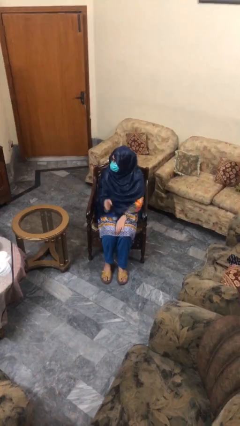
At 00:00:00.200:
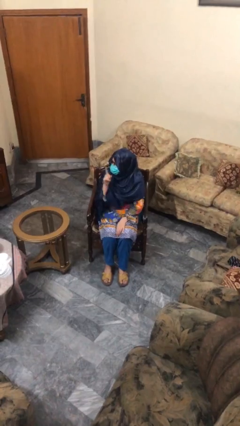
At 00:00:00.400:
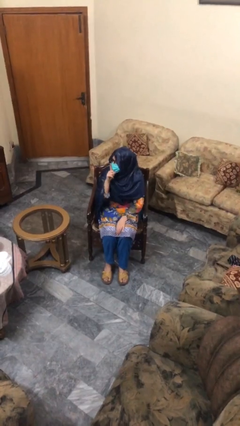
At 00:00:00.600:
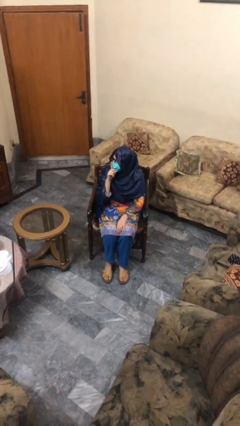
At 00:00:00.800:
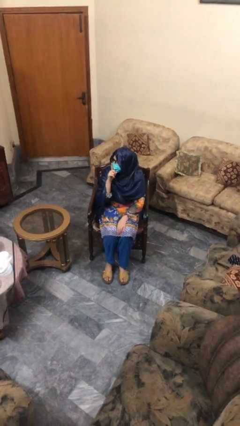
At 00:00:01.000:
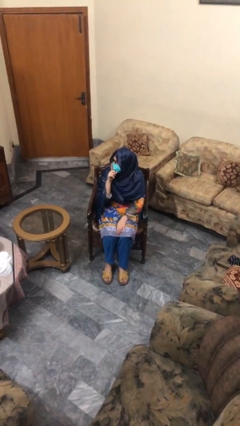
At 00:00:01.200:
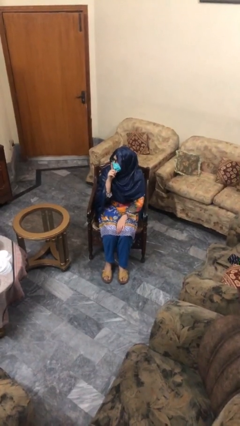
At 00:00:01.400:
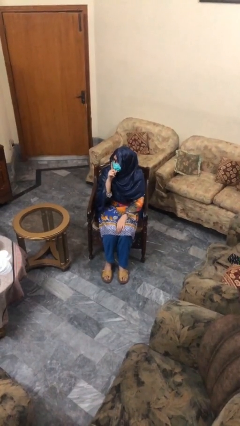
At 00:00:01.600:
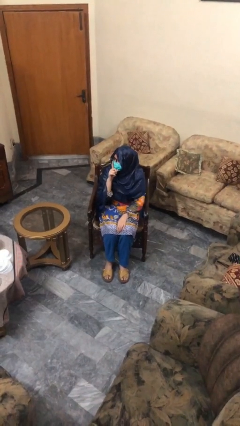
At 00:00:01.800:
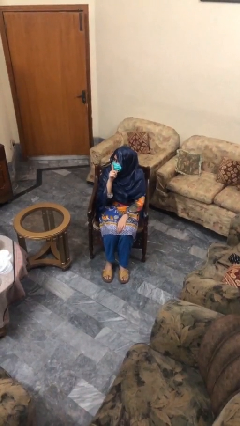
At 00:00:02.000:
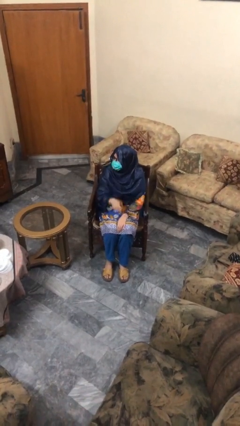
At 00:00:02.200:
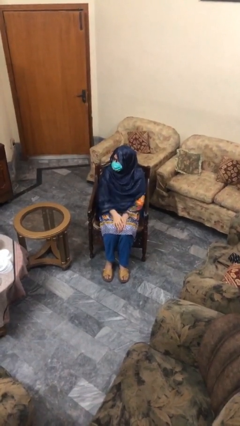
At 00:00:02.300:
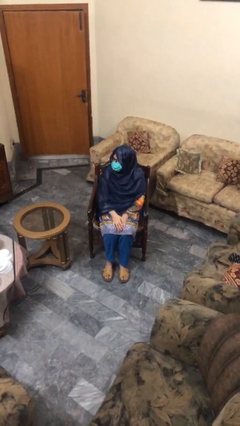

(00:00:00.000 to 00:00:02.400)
person gestures be quiet

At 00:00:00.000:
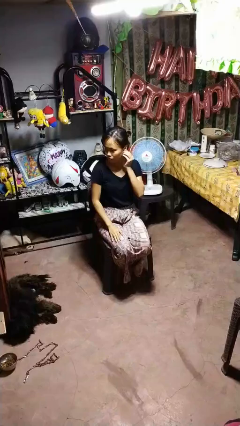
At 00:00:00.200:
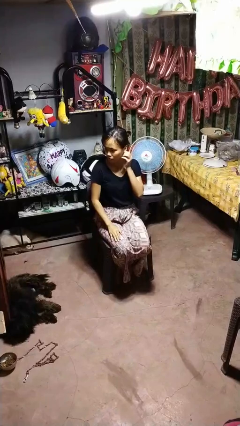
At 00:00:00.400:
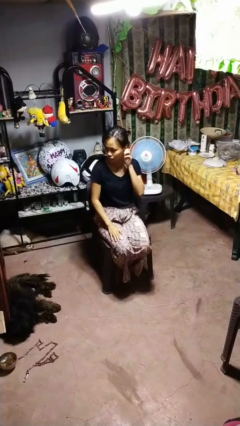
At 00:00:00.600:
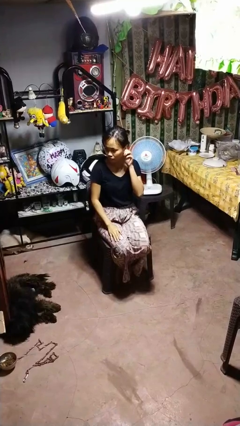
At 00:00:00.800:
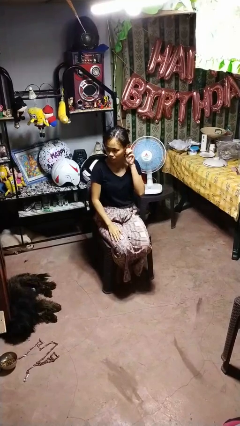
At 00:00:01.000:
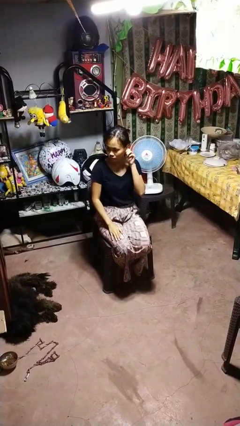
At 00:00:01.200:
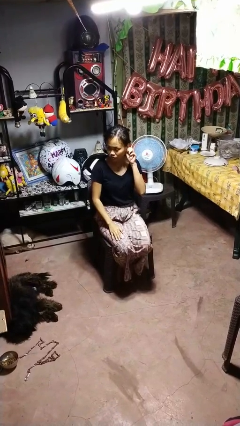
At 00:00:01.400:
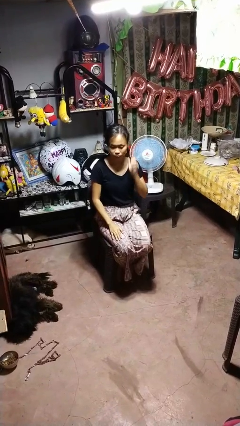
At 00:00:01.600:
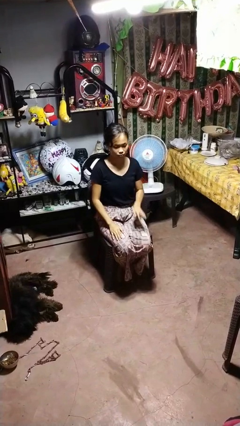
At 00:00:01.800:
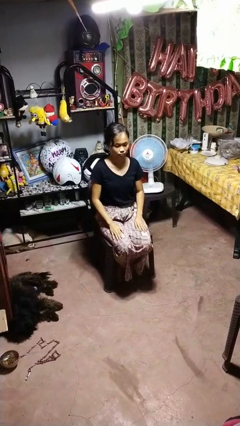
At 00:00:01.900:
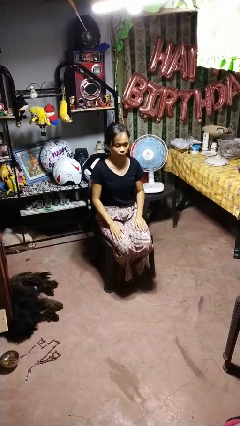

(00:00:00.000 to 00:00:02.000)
person touches earlobe

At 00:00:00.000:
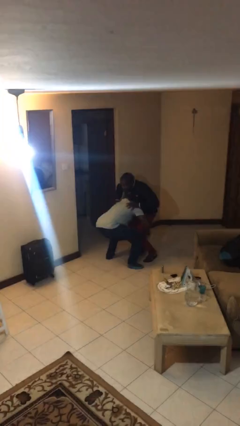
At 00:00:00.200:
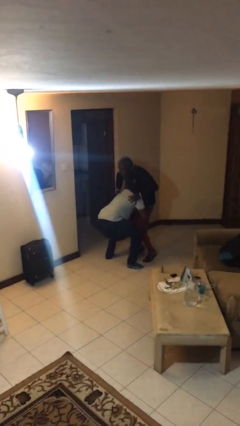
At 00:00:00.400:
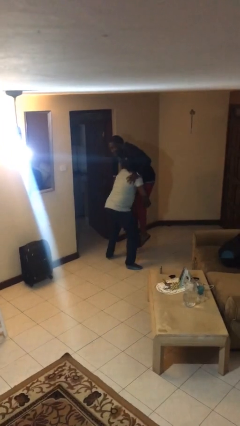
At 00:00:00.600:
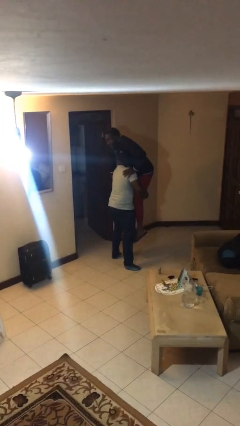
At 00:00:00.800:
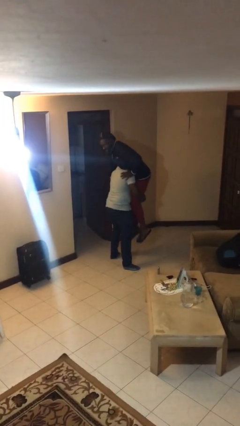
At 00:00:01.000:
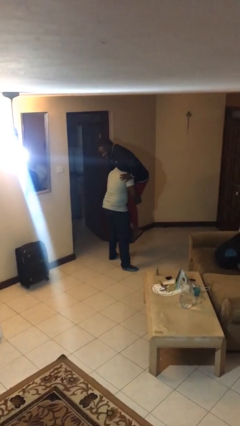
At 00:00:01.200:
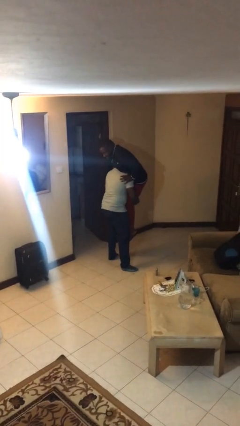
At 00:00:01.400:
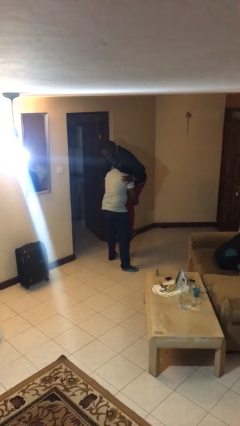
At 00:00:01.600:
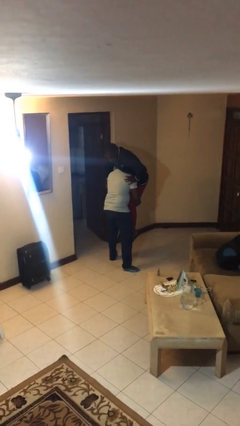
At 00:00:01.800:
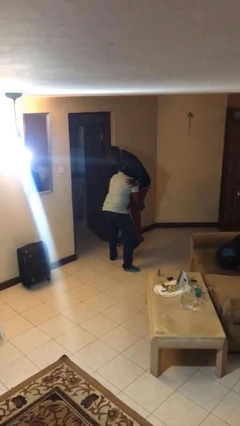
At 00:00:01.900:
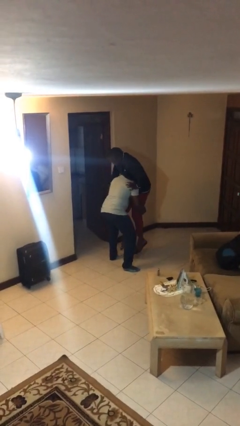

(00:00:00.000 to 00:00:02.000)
person picks up person

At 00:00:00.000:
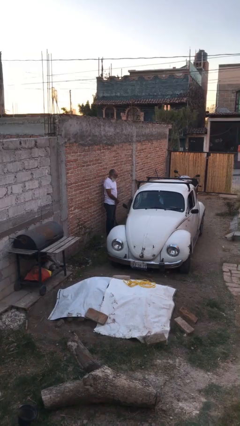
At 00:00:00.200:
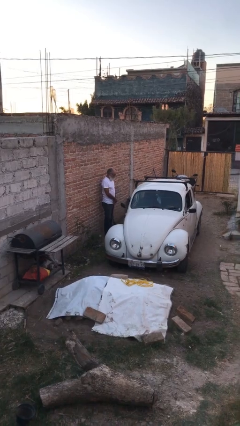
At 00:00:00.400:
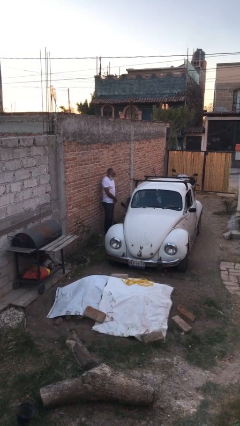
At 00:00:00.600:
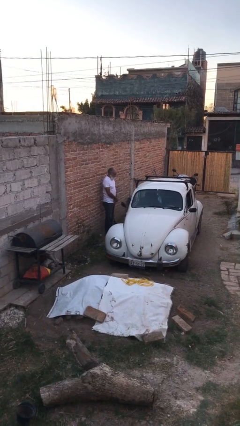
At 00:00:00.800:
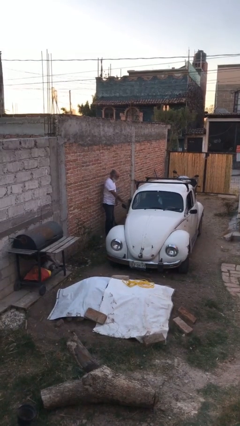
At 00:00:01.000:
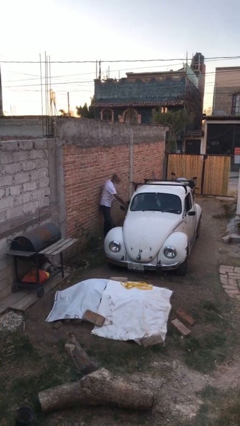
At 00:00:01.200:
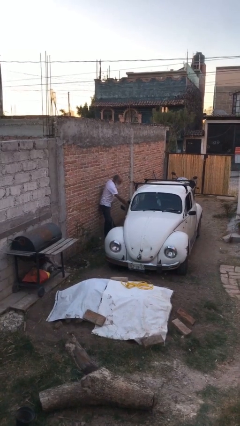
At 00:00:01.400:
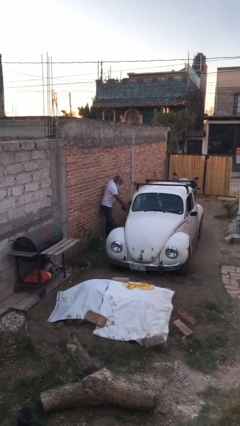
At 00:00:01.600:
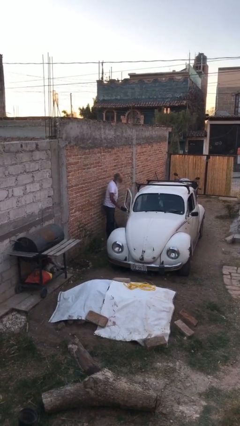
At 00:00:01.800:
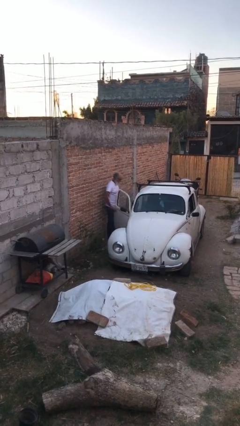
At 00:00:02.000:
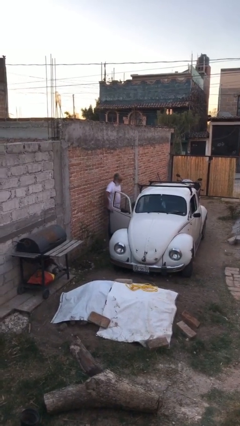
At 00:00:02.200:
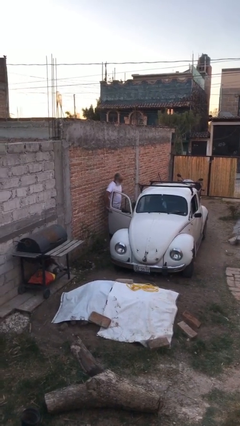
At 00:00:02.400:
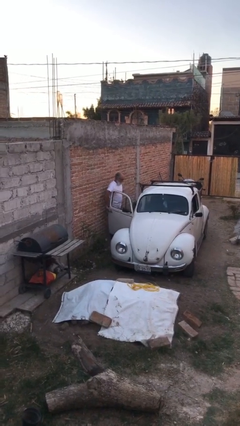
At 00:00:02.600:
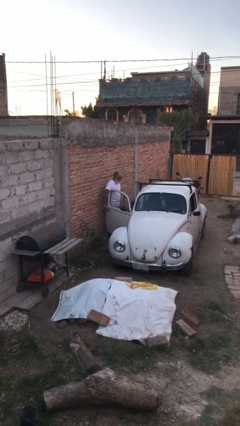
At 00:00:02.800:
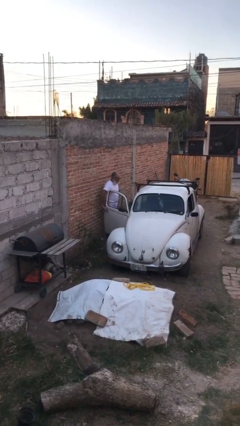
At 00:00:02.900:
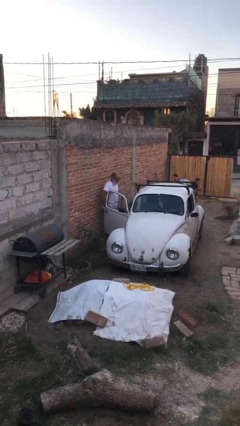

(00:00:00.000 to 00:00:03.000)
person opens car door

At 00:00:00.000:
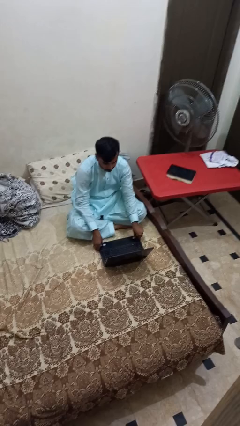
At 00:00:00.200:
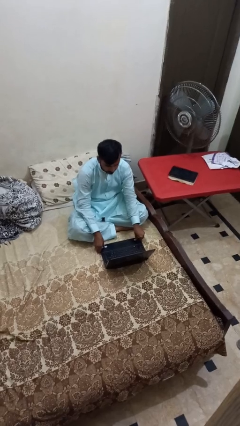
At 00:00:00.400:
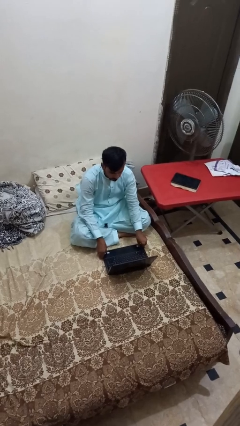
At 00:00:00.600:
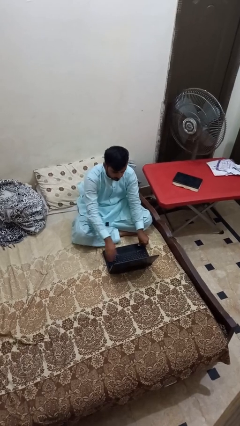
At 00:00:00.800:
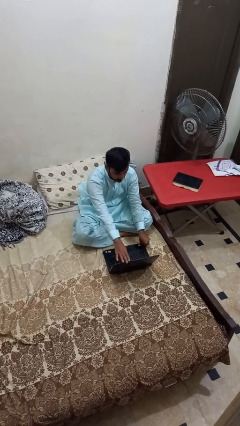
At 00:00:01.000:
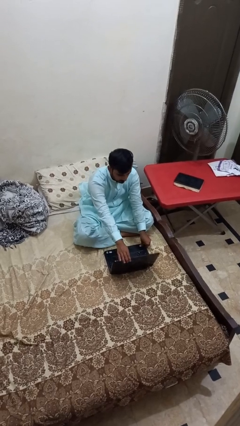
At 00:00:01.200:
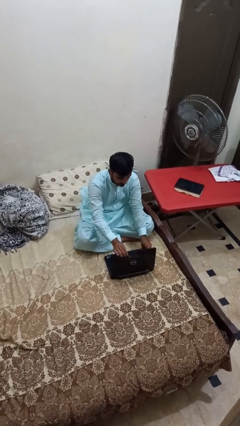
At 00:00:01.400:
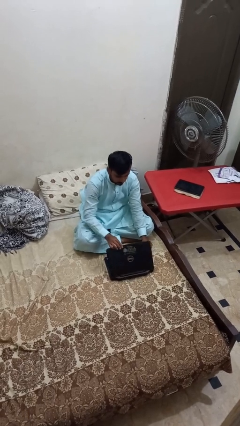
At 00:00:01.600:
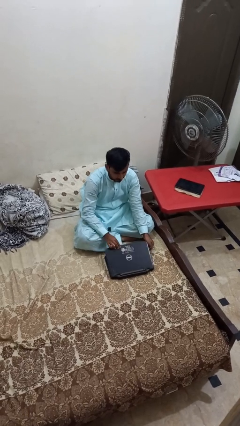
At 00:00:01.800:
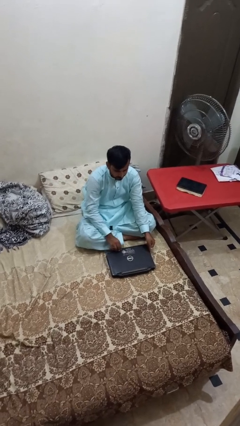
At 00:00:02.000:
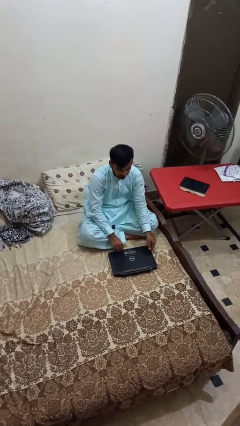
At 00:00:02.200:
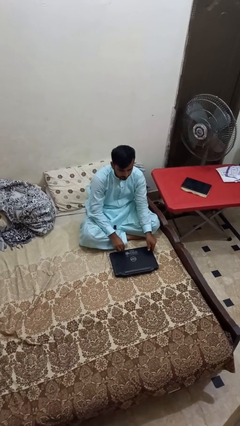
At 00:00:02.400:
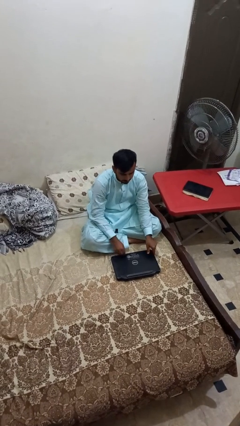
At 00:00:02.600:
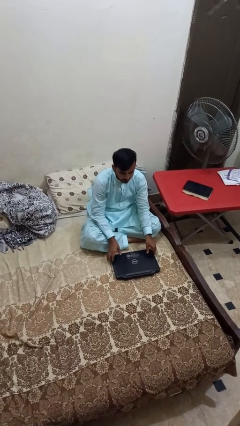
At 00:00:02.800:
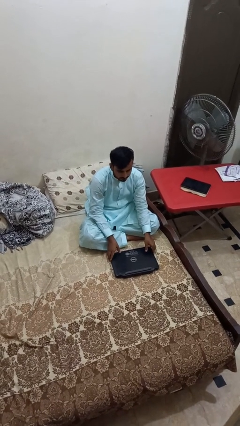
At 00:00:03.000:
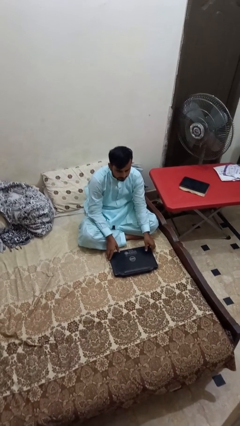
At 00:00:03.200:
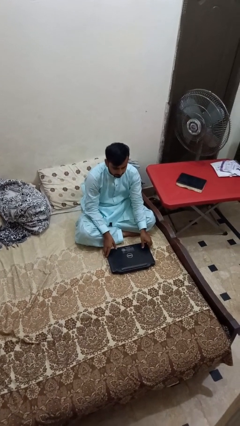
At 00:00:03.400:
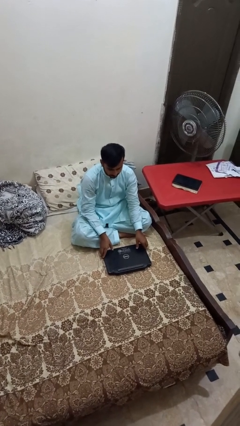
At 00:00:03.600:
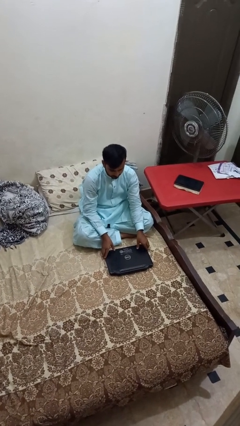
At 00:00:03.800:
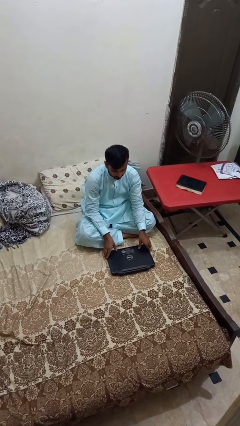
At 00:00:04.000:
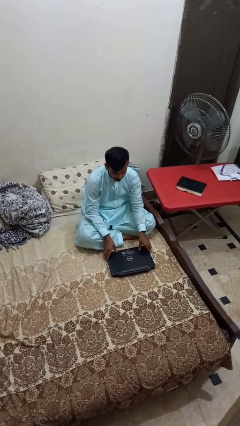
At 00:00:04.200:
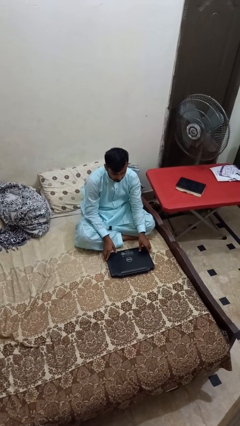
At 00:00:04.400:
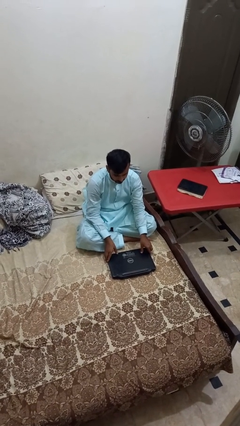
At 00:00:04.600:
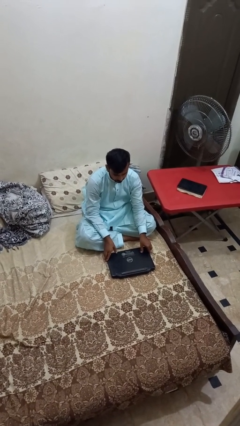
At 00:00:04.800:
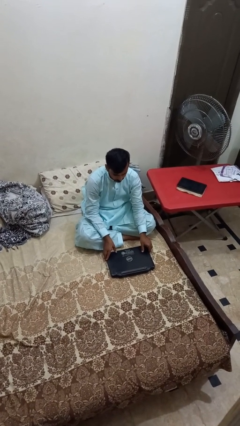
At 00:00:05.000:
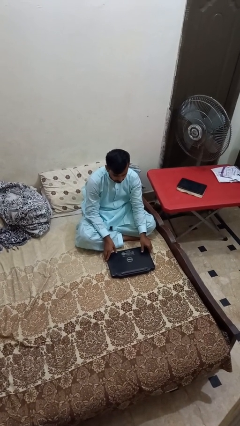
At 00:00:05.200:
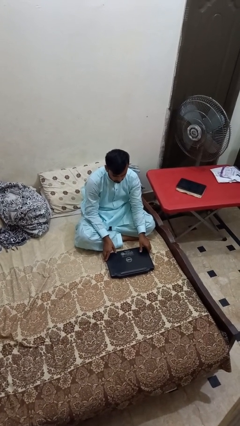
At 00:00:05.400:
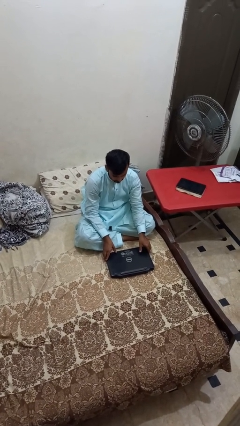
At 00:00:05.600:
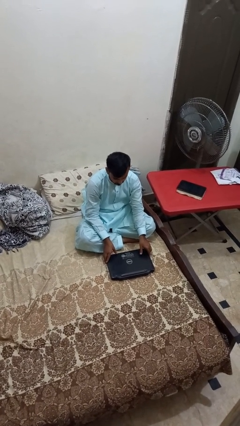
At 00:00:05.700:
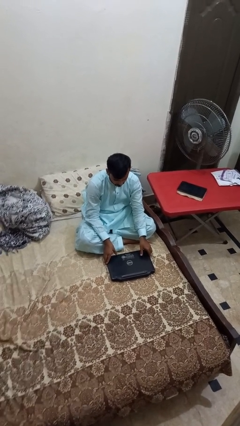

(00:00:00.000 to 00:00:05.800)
person closes laptop

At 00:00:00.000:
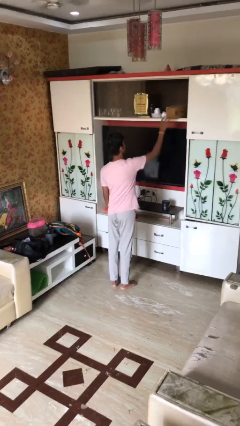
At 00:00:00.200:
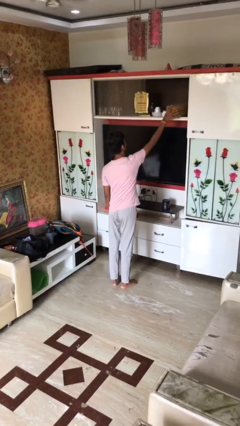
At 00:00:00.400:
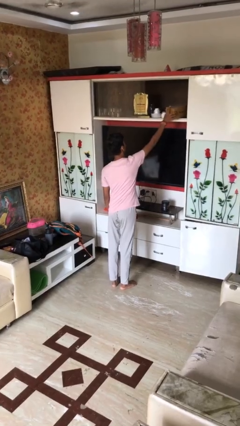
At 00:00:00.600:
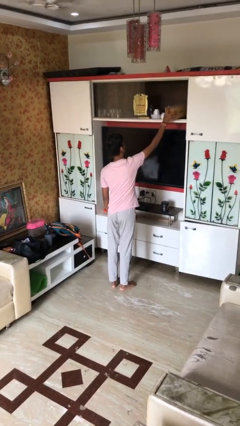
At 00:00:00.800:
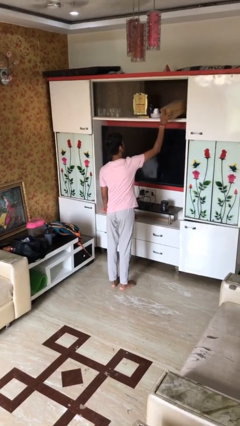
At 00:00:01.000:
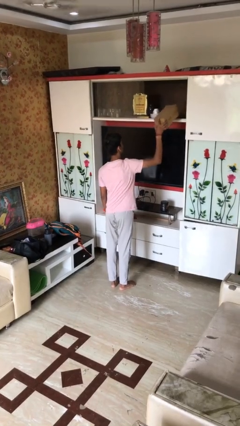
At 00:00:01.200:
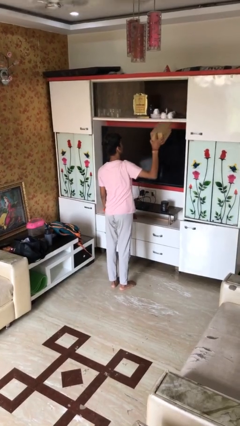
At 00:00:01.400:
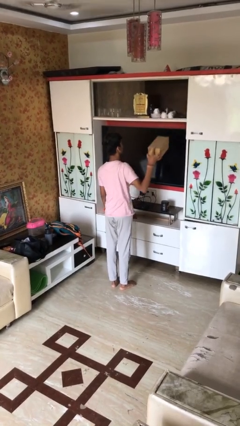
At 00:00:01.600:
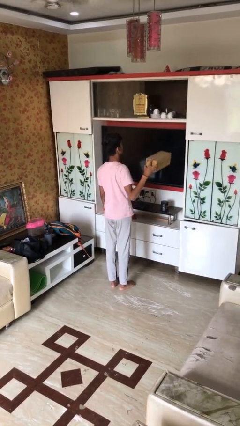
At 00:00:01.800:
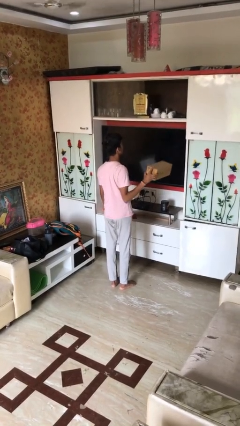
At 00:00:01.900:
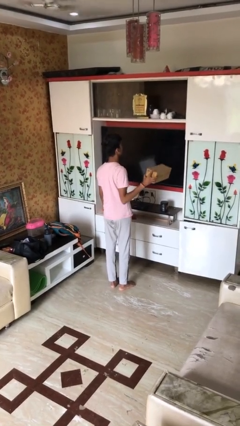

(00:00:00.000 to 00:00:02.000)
person picks up object from shelf
